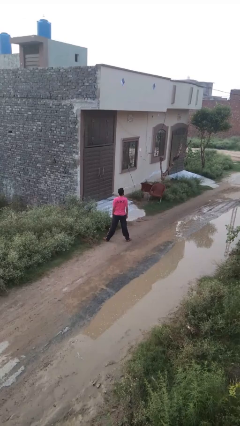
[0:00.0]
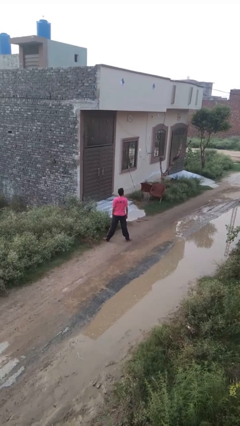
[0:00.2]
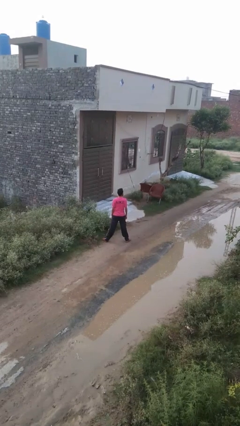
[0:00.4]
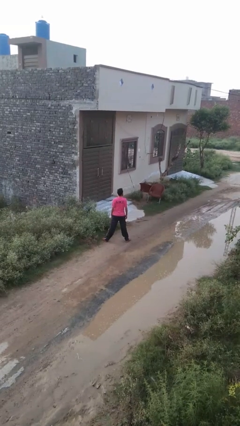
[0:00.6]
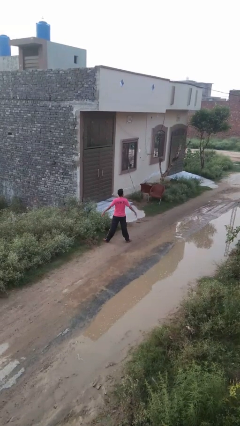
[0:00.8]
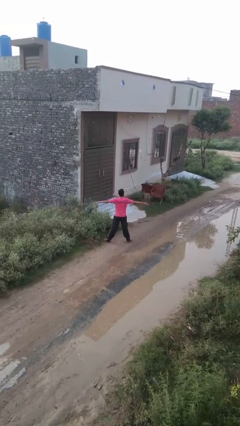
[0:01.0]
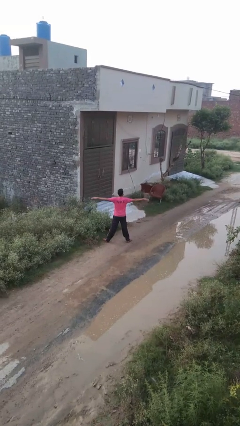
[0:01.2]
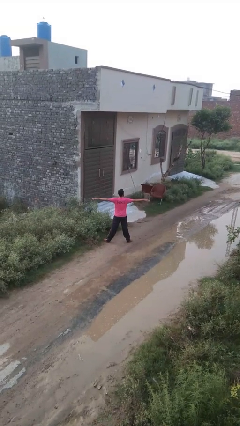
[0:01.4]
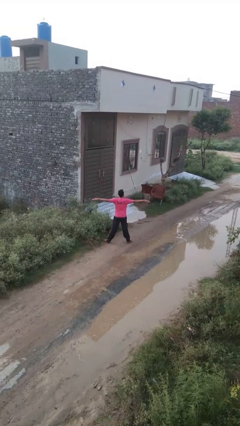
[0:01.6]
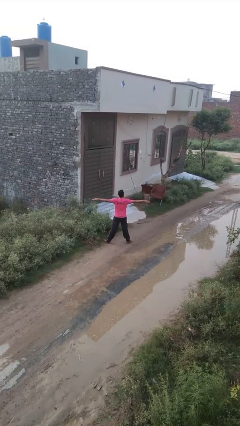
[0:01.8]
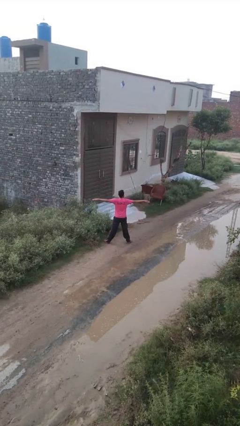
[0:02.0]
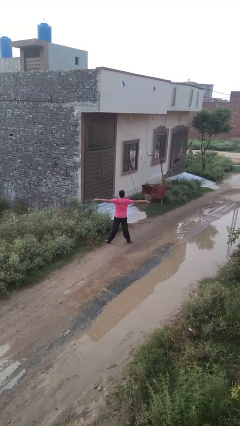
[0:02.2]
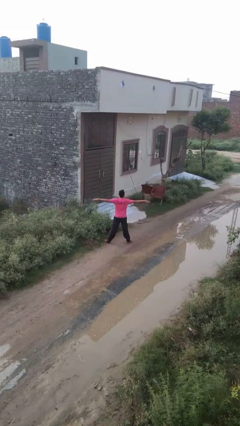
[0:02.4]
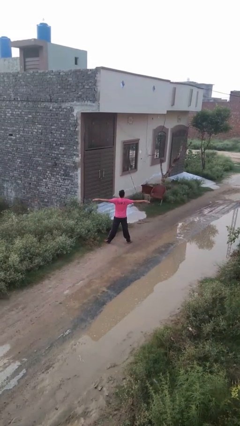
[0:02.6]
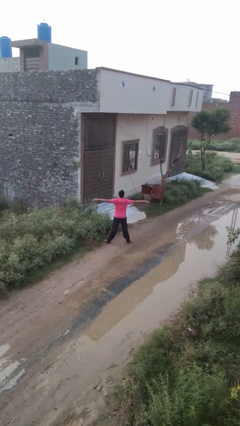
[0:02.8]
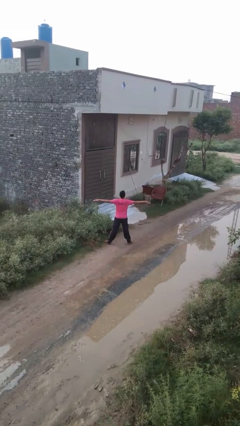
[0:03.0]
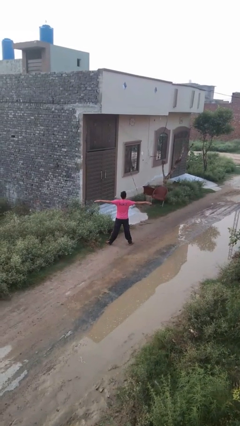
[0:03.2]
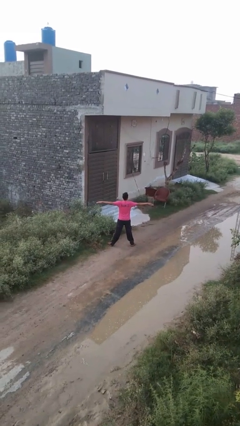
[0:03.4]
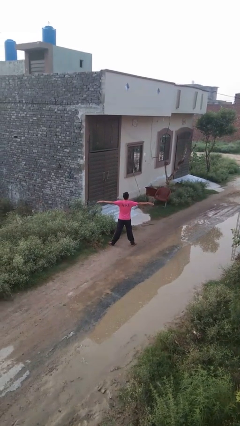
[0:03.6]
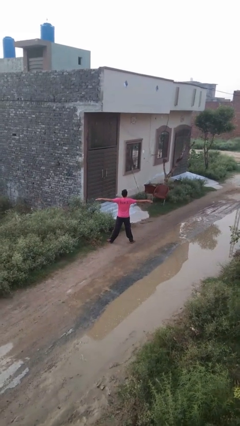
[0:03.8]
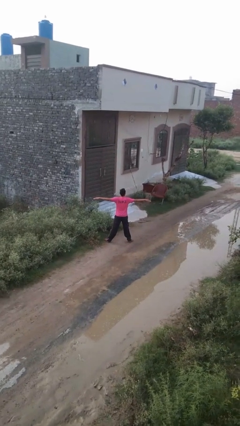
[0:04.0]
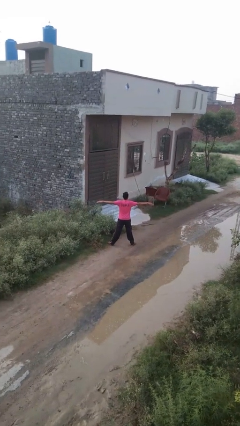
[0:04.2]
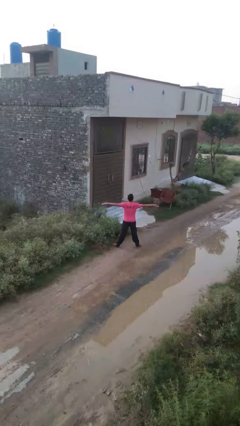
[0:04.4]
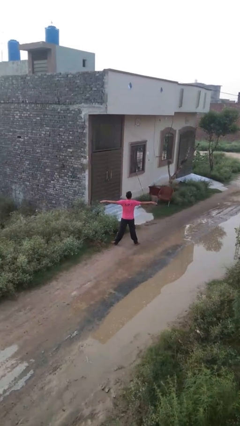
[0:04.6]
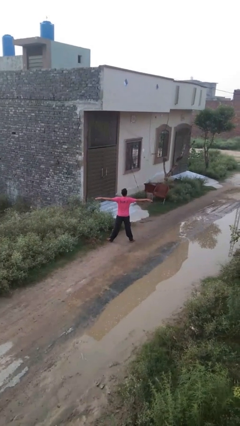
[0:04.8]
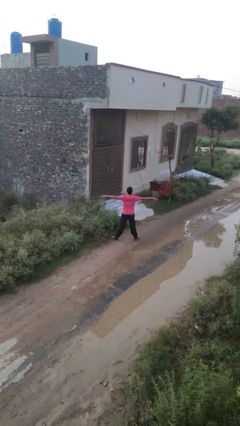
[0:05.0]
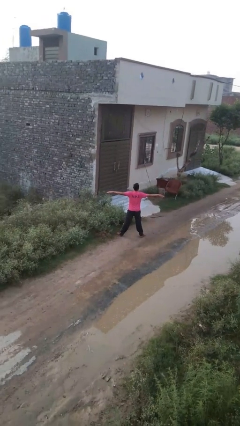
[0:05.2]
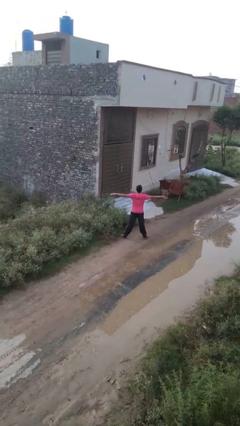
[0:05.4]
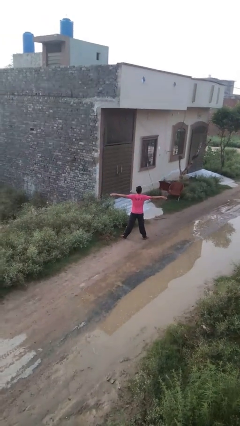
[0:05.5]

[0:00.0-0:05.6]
person stretches arms to side

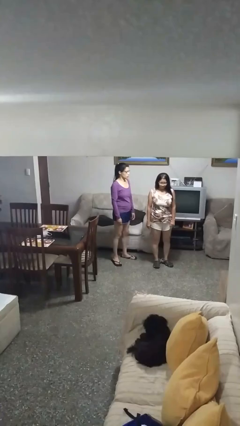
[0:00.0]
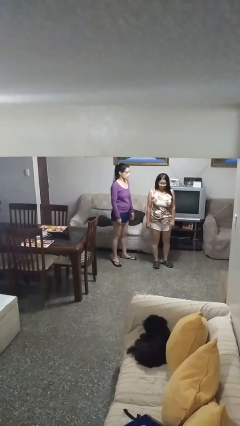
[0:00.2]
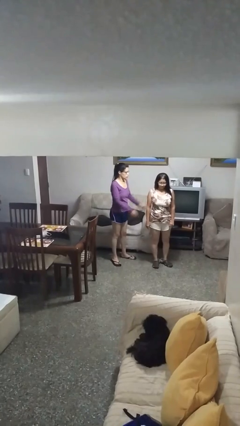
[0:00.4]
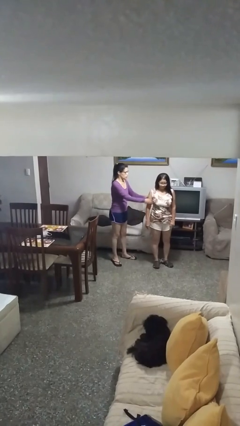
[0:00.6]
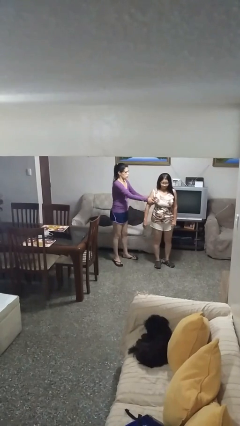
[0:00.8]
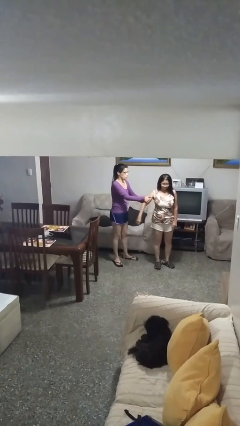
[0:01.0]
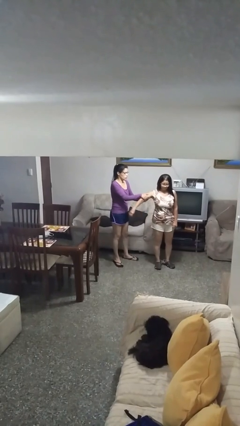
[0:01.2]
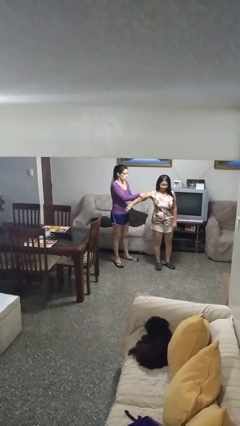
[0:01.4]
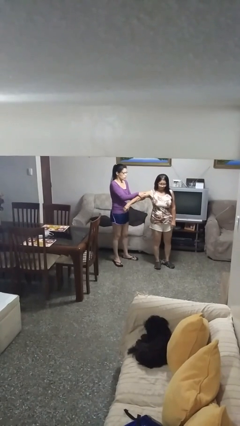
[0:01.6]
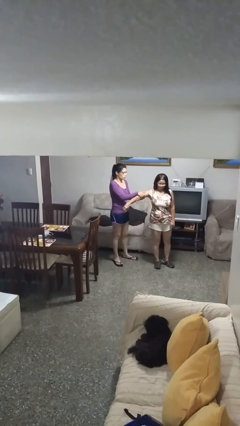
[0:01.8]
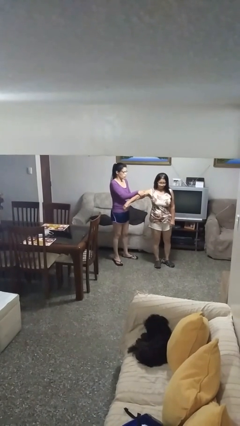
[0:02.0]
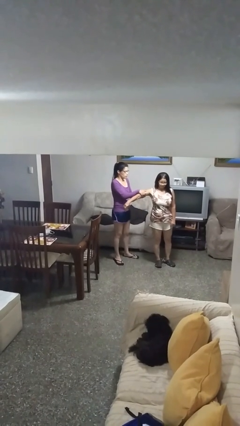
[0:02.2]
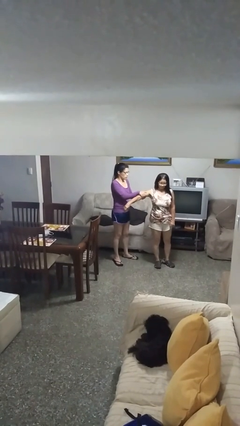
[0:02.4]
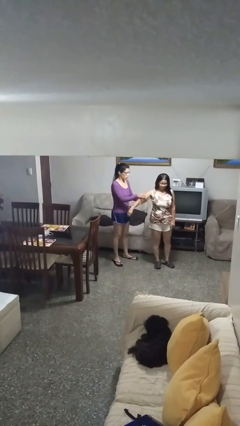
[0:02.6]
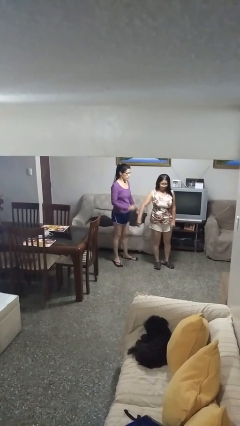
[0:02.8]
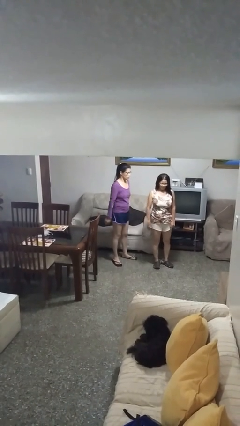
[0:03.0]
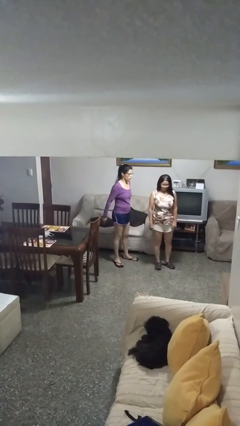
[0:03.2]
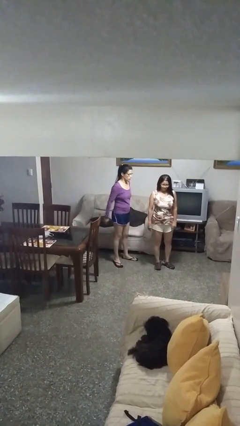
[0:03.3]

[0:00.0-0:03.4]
person grabs person by bicep

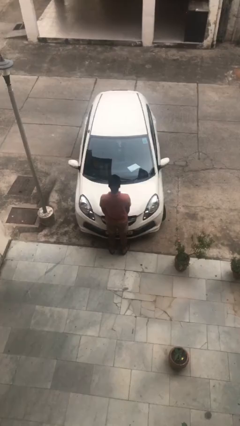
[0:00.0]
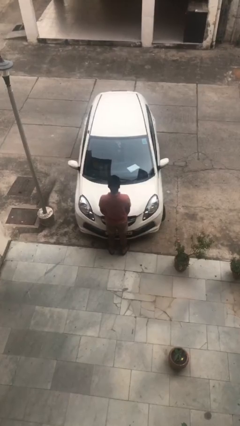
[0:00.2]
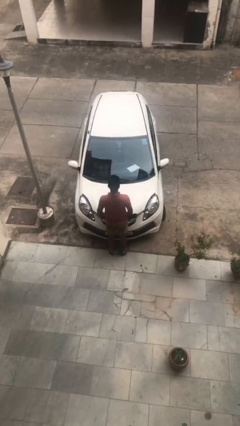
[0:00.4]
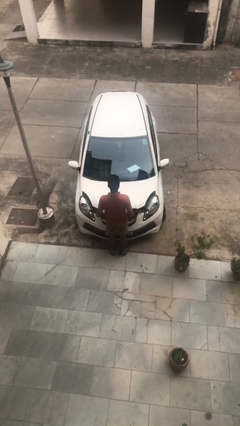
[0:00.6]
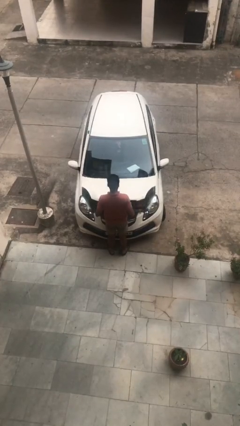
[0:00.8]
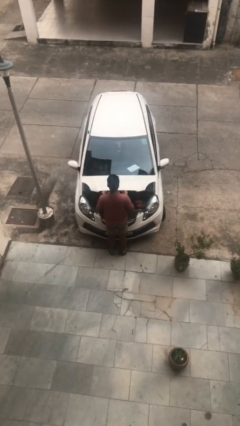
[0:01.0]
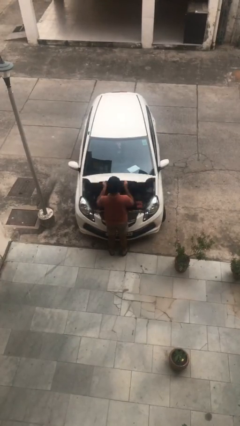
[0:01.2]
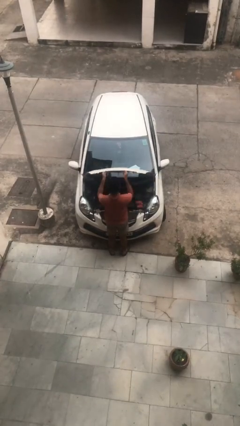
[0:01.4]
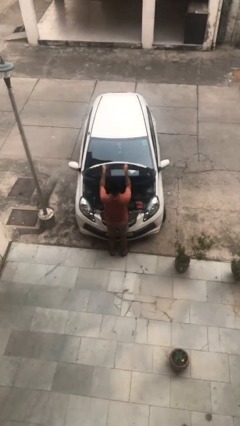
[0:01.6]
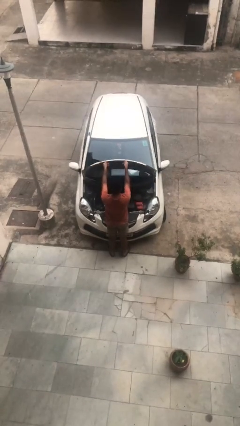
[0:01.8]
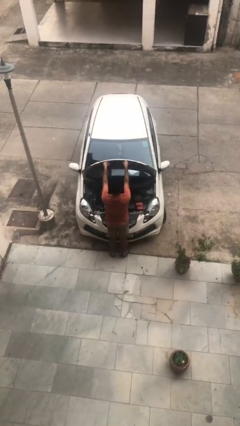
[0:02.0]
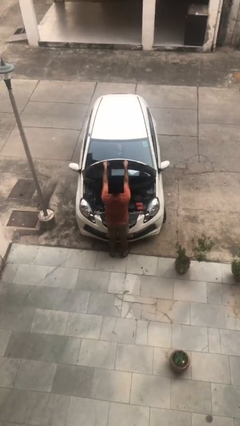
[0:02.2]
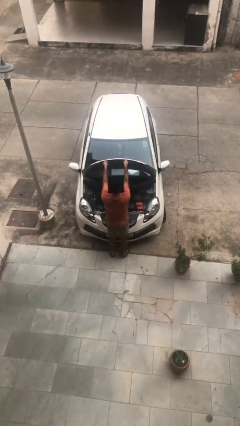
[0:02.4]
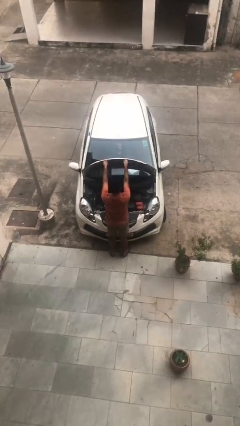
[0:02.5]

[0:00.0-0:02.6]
person opens car hood

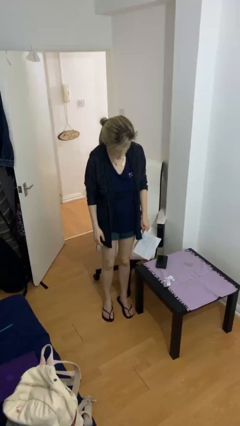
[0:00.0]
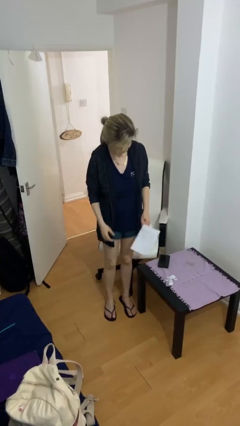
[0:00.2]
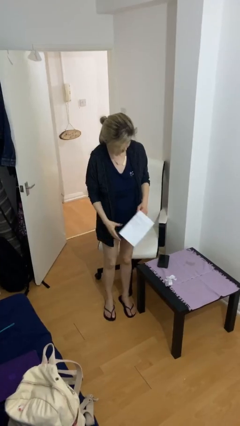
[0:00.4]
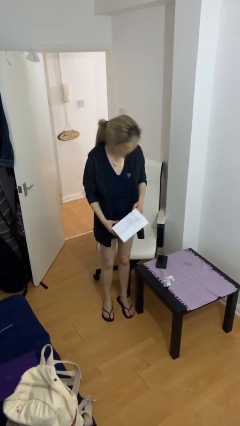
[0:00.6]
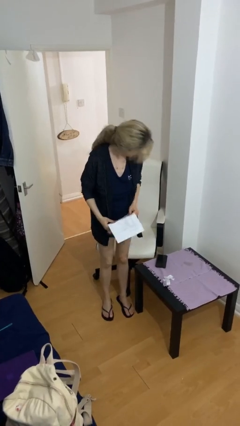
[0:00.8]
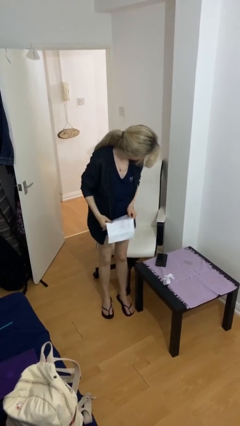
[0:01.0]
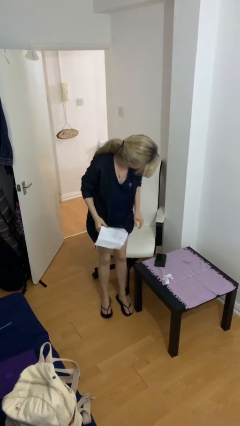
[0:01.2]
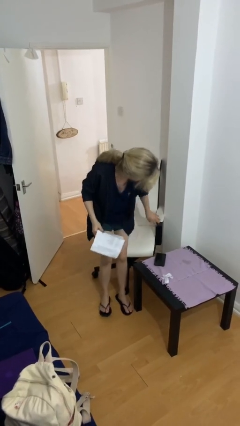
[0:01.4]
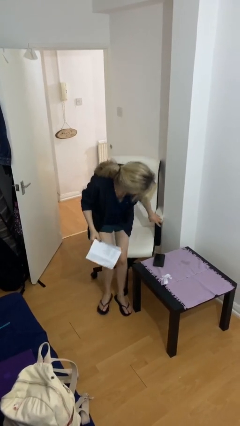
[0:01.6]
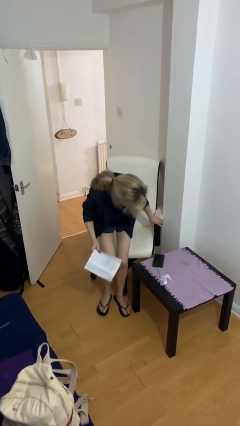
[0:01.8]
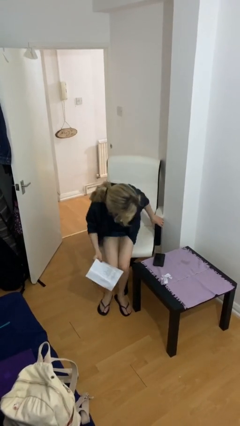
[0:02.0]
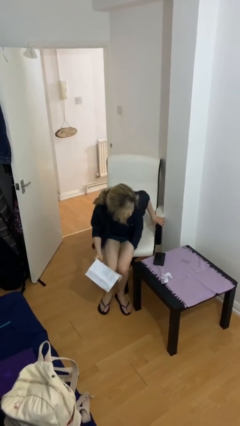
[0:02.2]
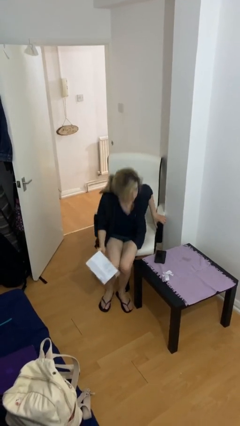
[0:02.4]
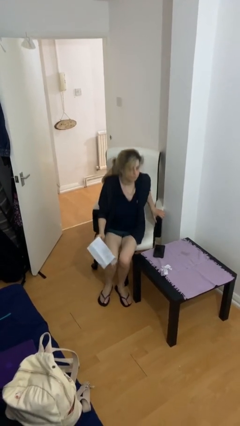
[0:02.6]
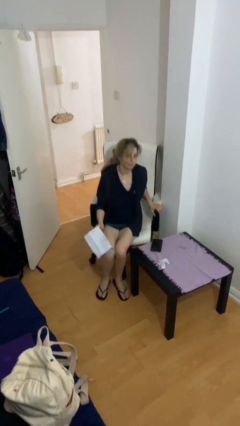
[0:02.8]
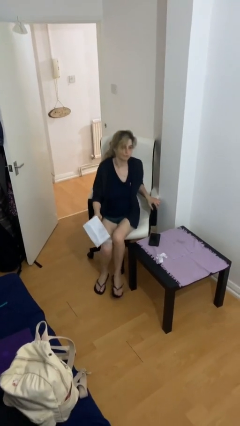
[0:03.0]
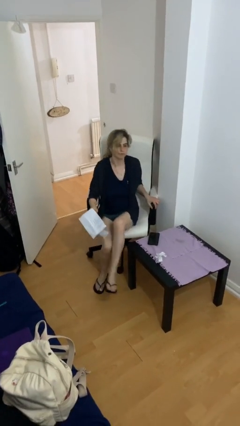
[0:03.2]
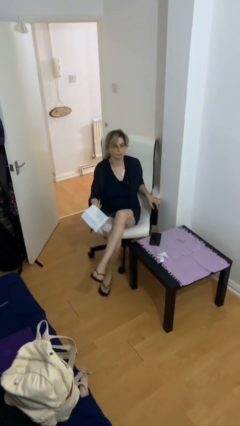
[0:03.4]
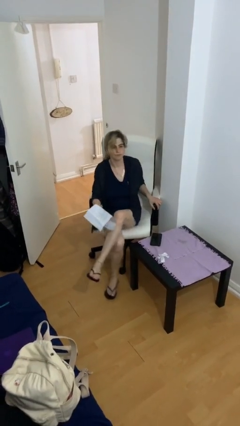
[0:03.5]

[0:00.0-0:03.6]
person sits down

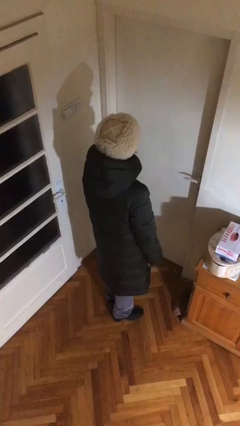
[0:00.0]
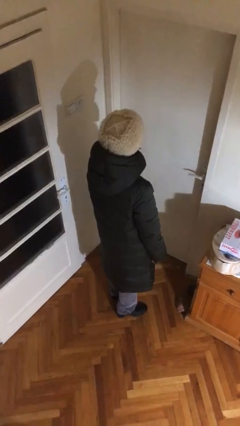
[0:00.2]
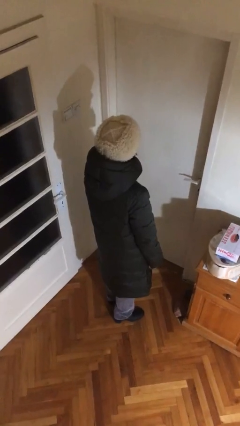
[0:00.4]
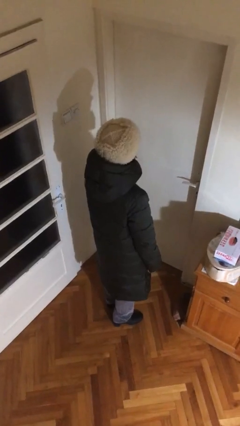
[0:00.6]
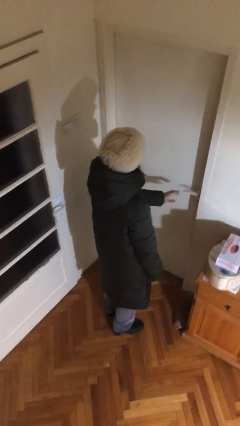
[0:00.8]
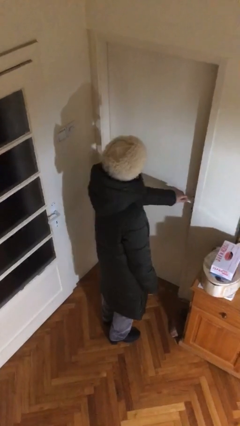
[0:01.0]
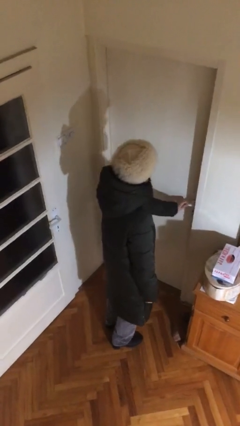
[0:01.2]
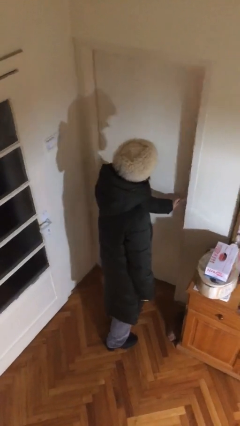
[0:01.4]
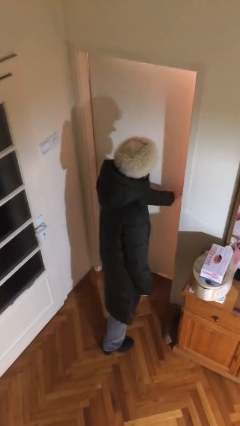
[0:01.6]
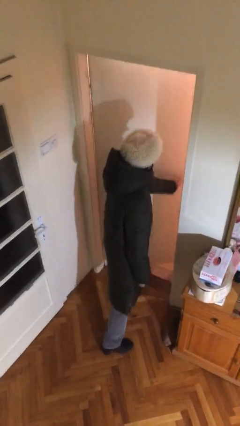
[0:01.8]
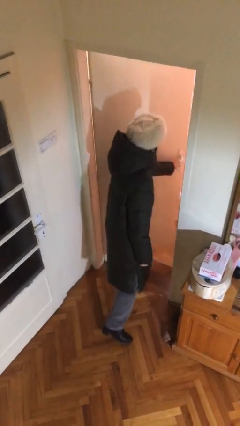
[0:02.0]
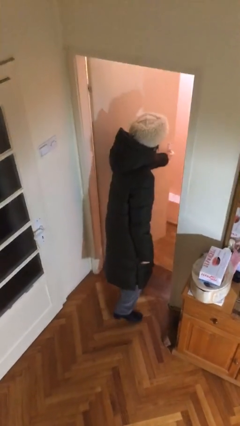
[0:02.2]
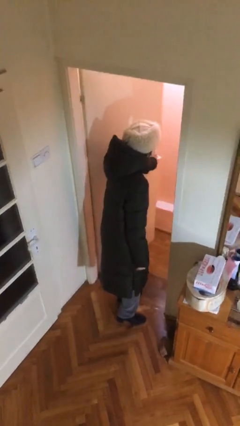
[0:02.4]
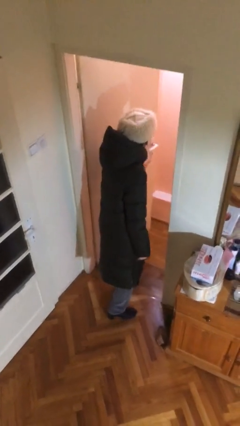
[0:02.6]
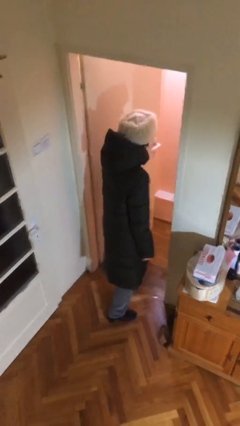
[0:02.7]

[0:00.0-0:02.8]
person opens facility door
